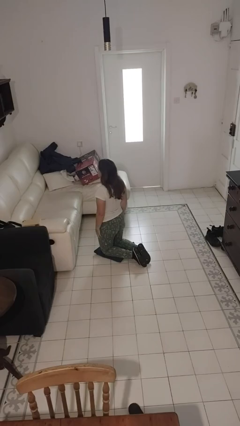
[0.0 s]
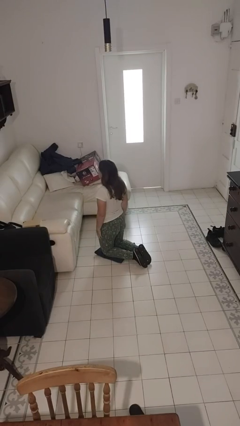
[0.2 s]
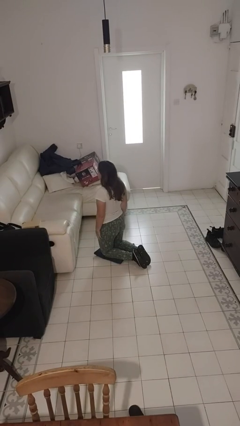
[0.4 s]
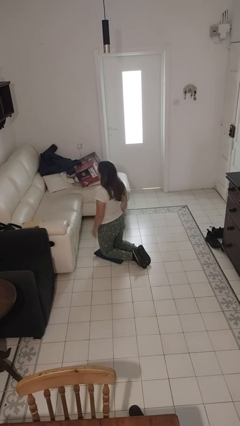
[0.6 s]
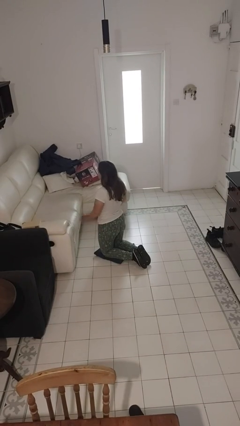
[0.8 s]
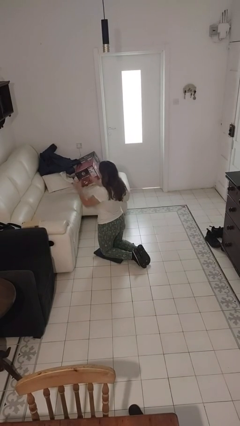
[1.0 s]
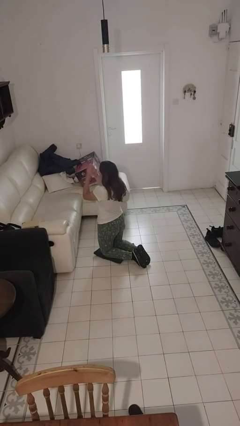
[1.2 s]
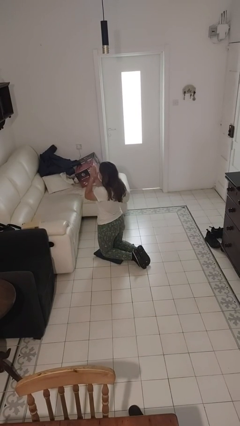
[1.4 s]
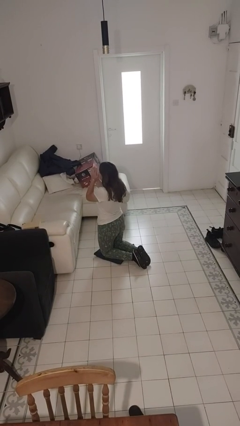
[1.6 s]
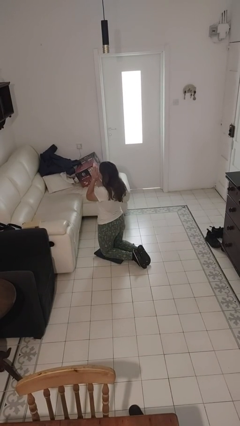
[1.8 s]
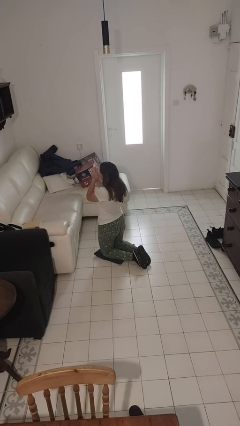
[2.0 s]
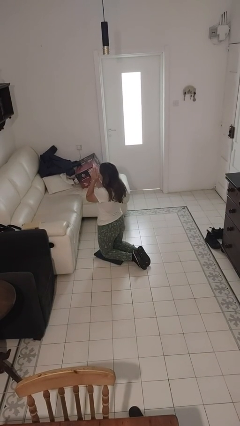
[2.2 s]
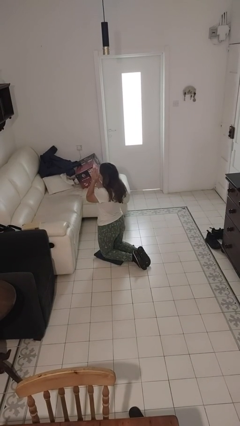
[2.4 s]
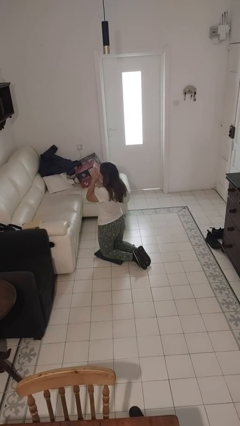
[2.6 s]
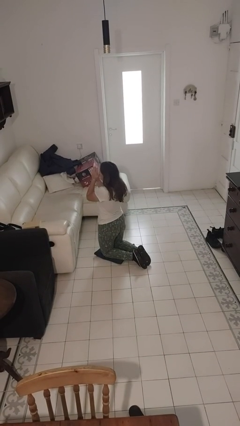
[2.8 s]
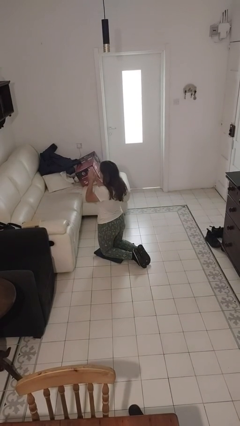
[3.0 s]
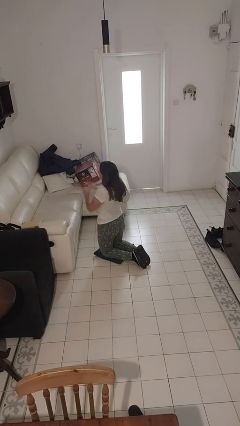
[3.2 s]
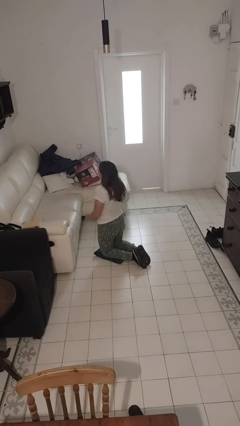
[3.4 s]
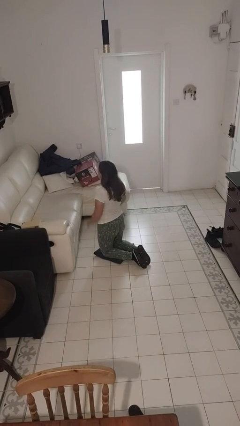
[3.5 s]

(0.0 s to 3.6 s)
person prays

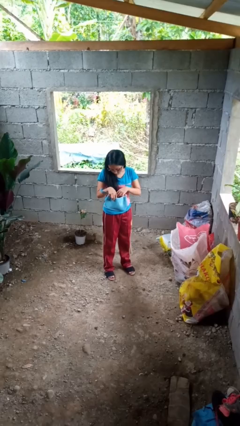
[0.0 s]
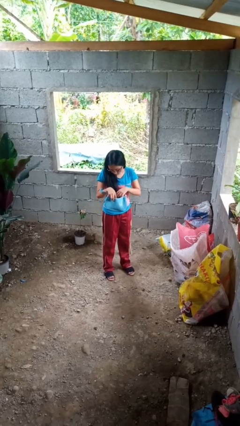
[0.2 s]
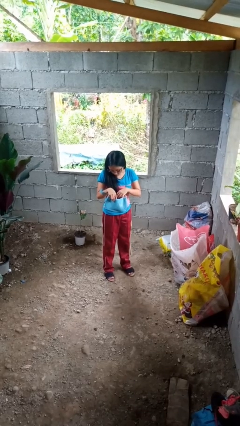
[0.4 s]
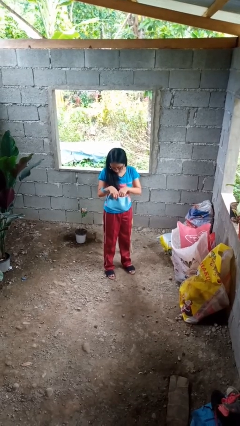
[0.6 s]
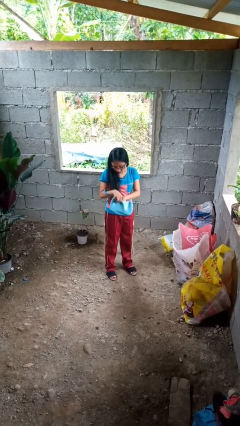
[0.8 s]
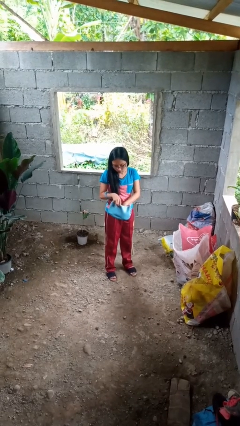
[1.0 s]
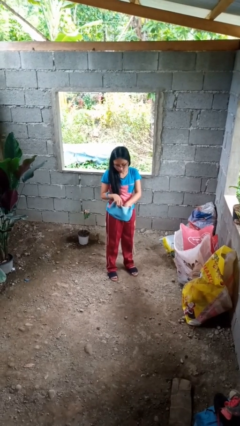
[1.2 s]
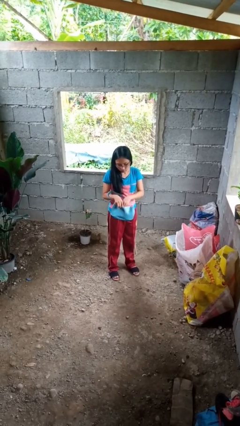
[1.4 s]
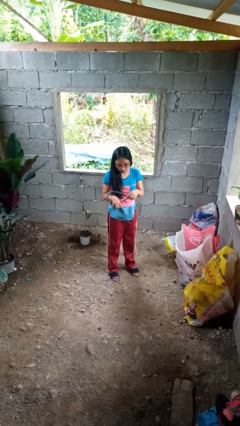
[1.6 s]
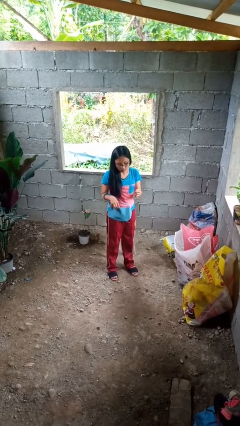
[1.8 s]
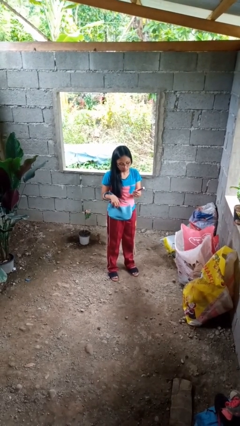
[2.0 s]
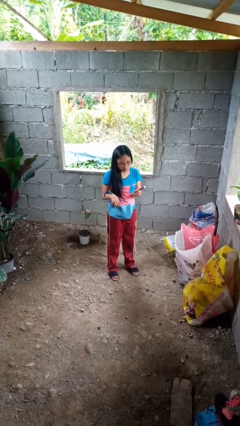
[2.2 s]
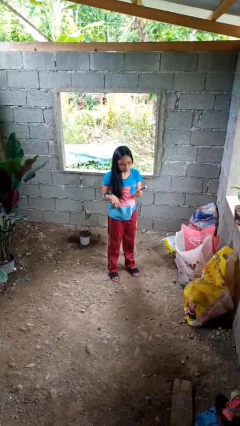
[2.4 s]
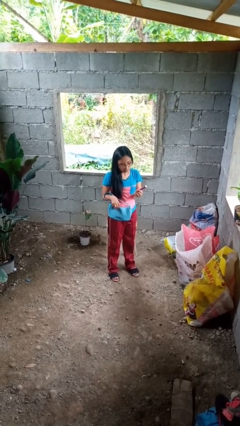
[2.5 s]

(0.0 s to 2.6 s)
person takes object from purse

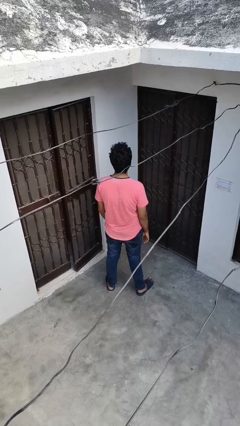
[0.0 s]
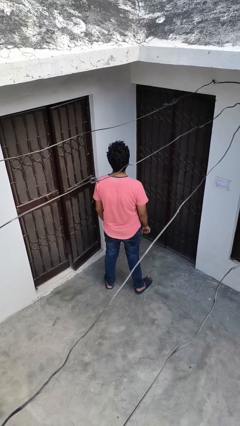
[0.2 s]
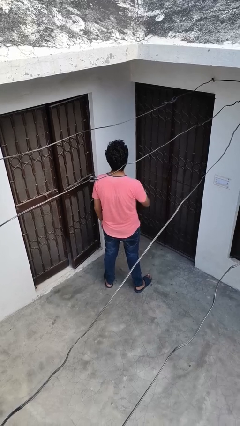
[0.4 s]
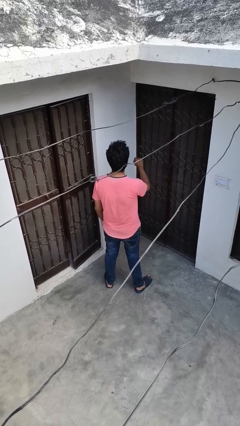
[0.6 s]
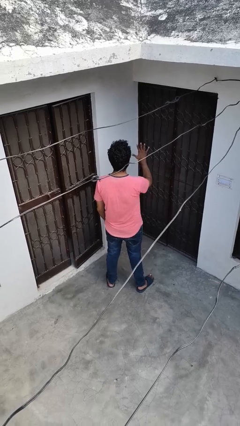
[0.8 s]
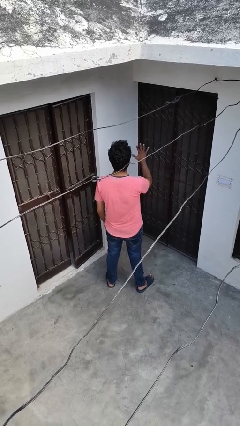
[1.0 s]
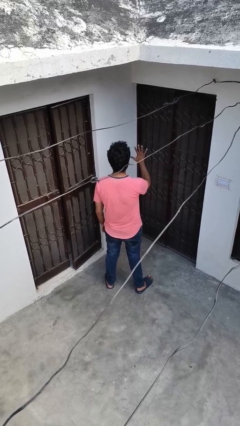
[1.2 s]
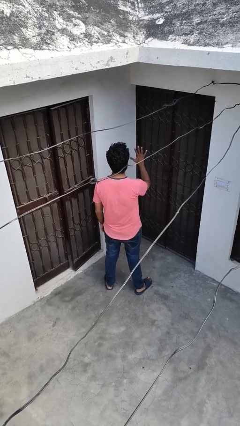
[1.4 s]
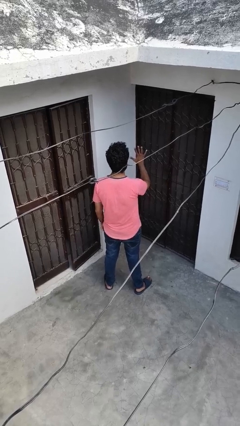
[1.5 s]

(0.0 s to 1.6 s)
person gestures number five

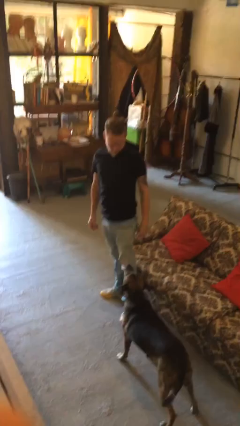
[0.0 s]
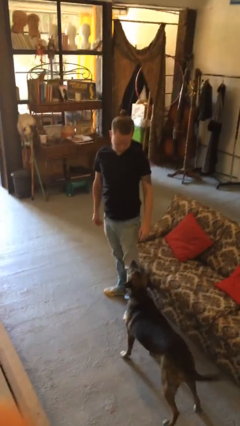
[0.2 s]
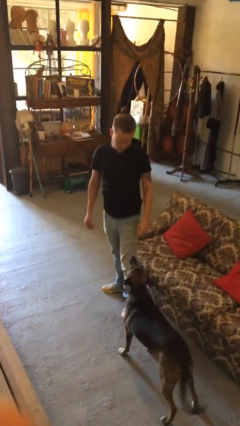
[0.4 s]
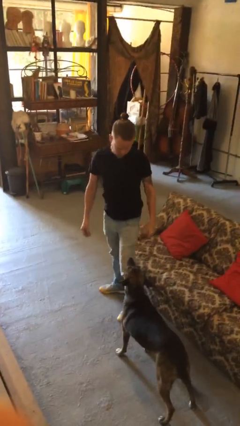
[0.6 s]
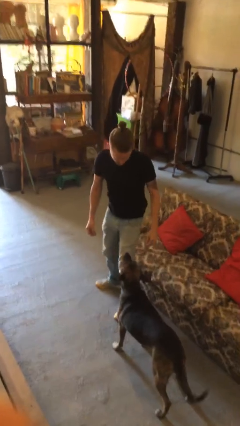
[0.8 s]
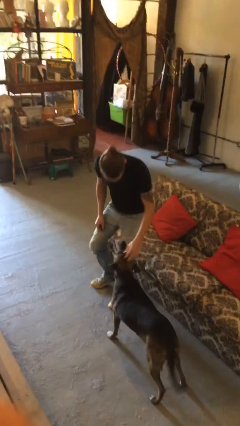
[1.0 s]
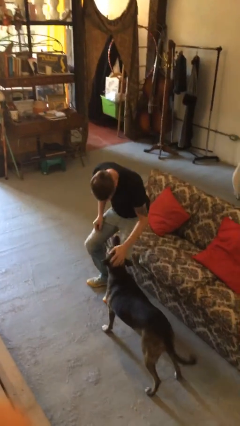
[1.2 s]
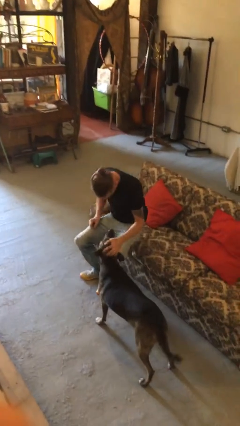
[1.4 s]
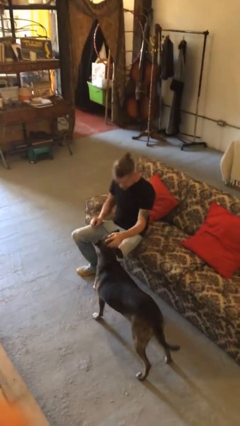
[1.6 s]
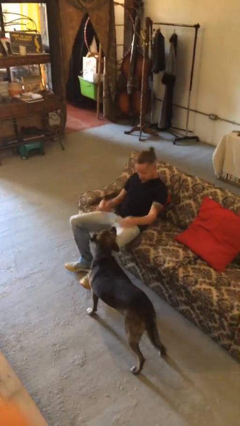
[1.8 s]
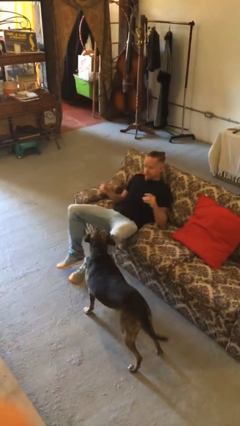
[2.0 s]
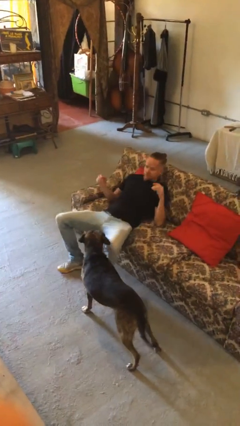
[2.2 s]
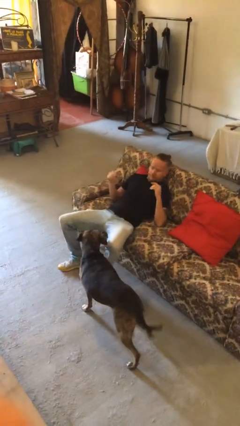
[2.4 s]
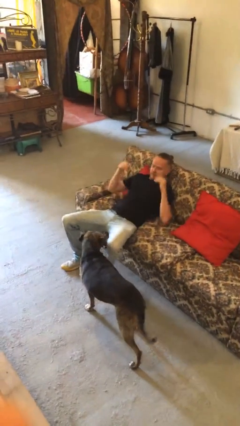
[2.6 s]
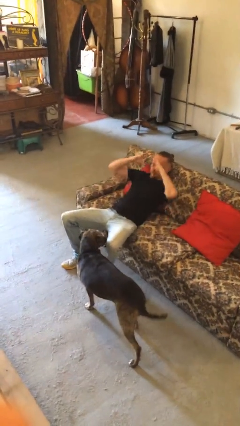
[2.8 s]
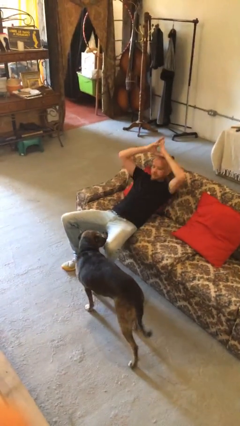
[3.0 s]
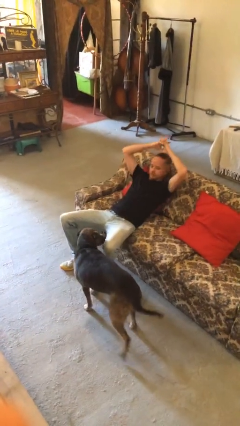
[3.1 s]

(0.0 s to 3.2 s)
person lies down on couch

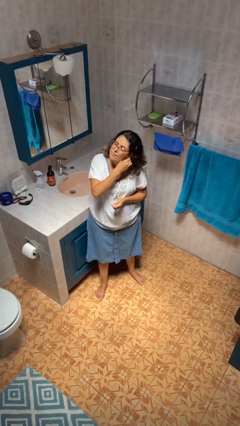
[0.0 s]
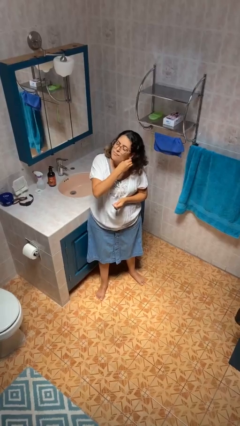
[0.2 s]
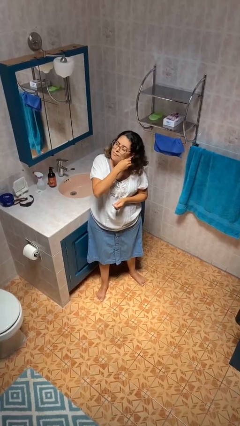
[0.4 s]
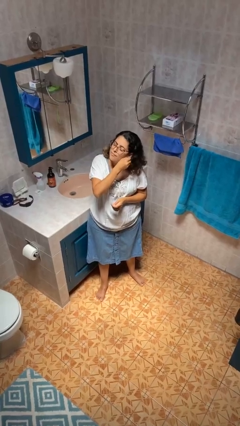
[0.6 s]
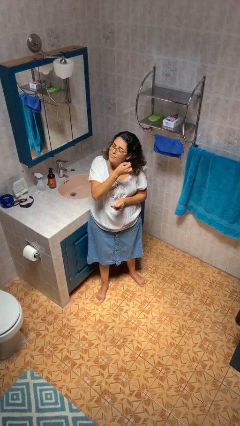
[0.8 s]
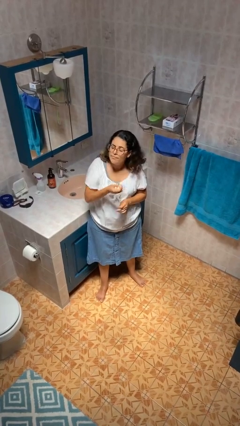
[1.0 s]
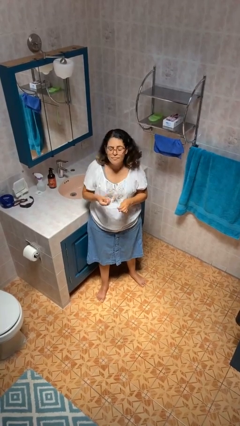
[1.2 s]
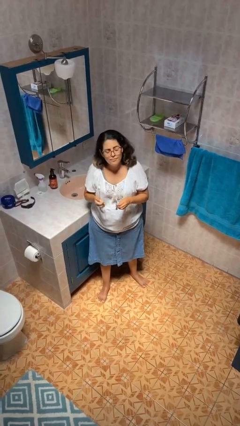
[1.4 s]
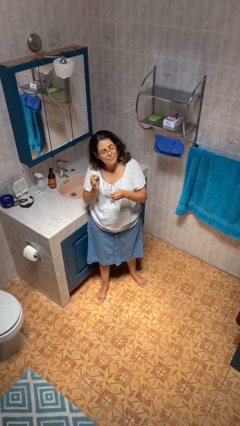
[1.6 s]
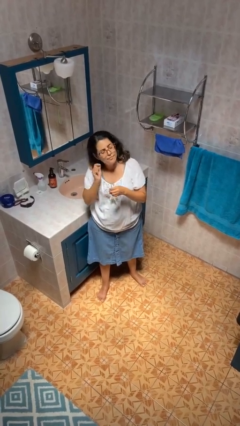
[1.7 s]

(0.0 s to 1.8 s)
person takes off earrings

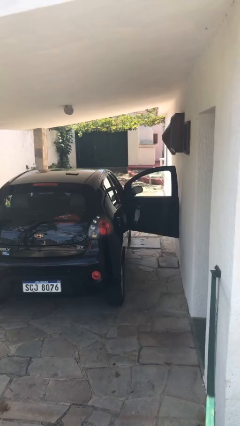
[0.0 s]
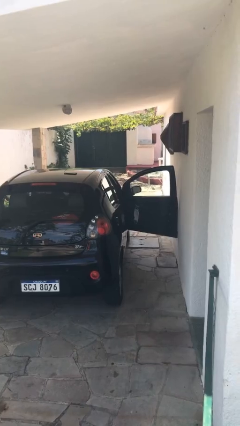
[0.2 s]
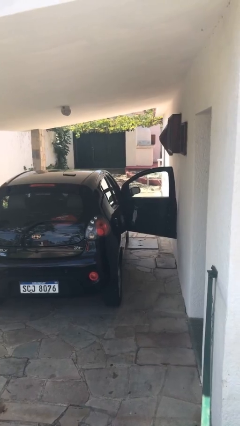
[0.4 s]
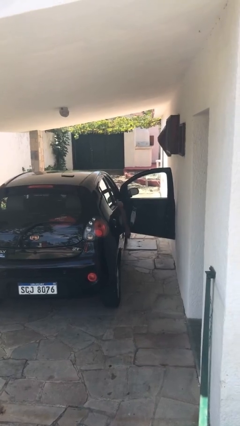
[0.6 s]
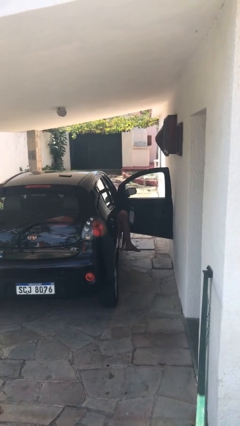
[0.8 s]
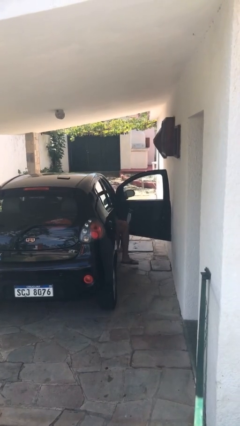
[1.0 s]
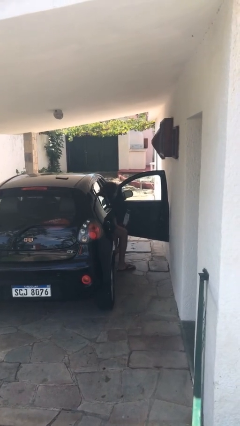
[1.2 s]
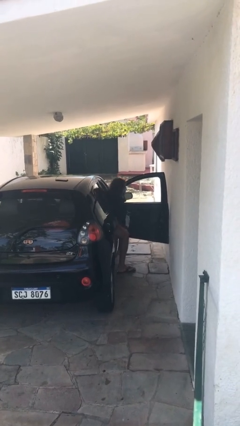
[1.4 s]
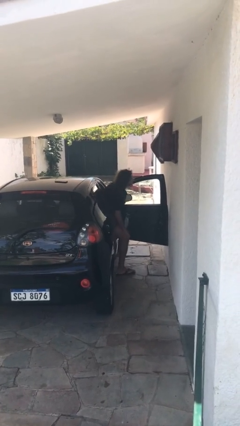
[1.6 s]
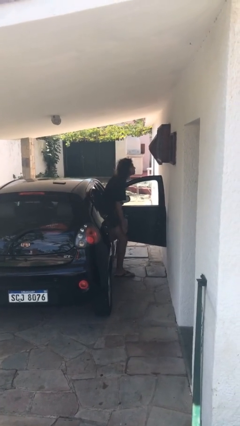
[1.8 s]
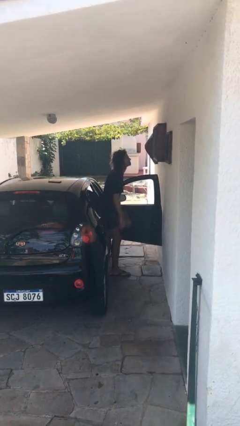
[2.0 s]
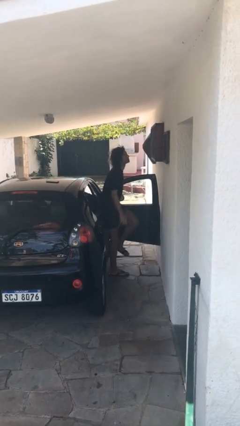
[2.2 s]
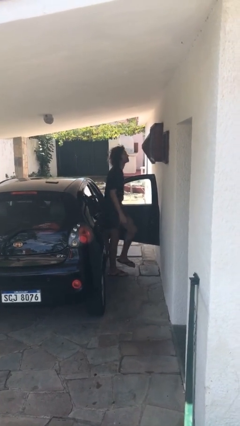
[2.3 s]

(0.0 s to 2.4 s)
person exits car

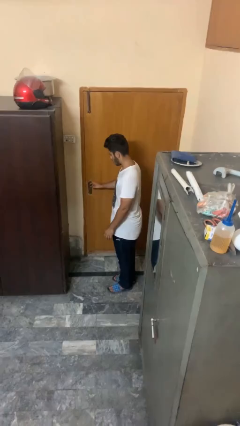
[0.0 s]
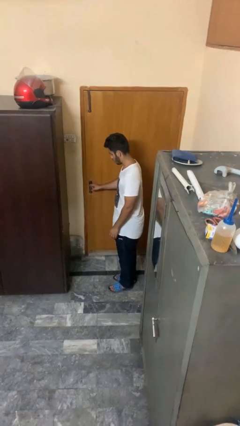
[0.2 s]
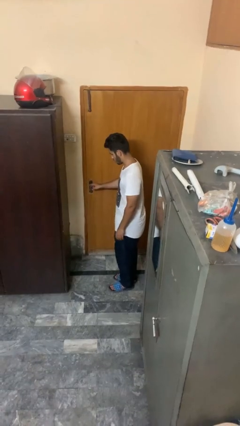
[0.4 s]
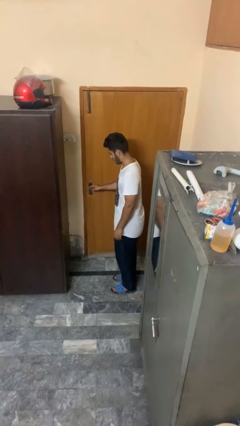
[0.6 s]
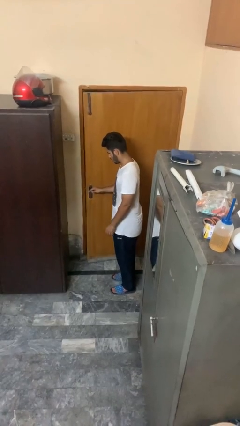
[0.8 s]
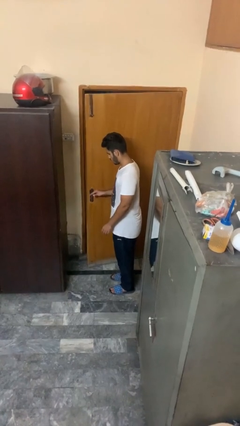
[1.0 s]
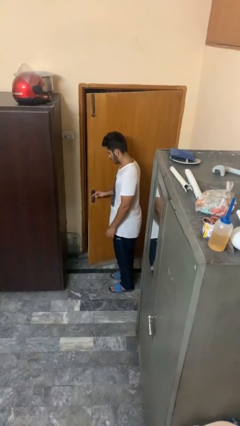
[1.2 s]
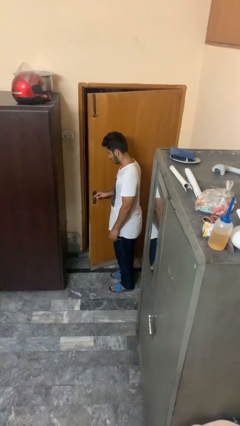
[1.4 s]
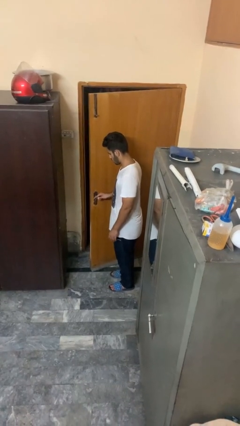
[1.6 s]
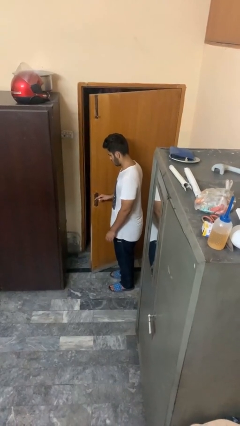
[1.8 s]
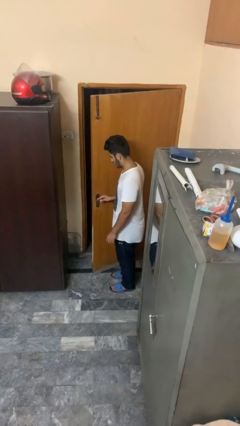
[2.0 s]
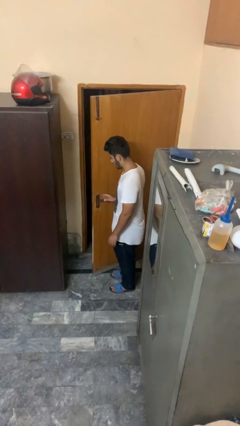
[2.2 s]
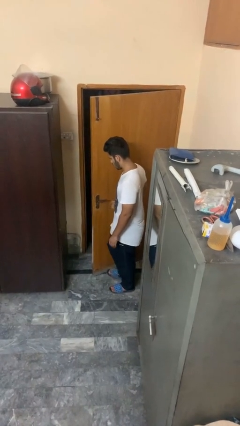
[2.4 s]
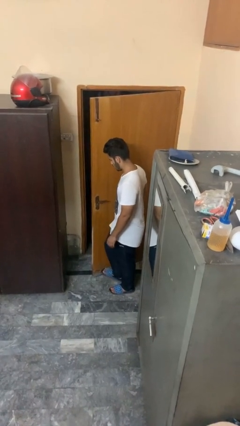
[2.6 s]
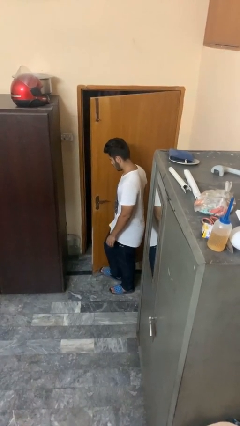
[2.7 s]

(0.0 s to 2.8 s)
person opens facility door
